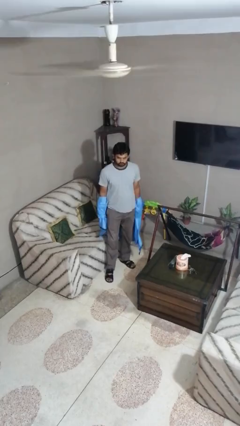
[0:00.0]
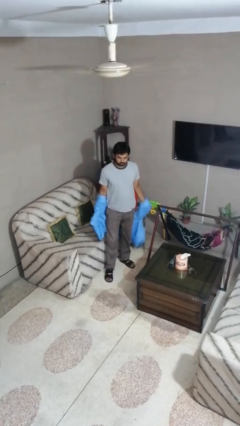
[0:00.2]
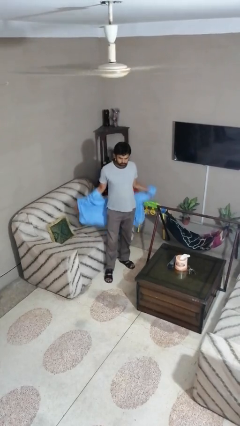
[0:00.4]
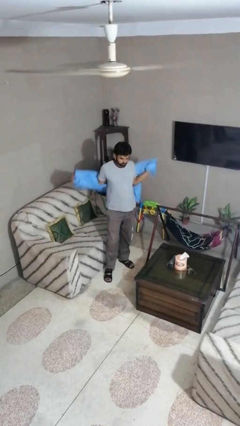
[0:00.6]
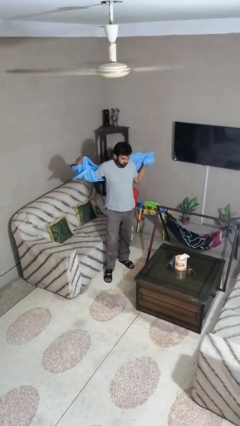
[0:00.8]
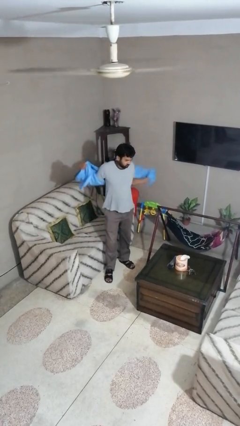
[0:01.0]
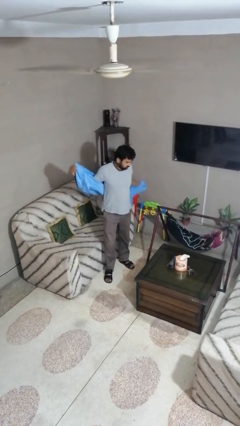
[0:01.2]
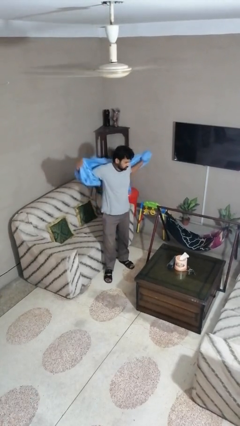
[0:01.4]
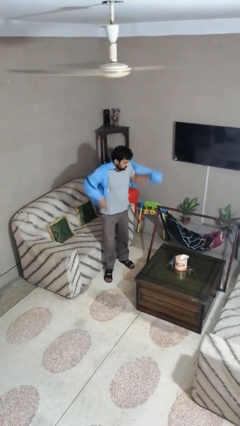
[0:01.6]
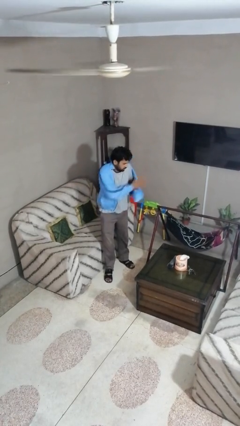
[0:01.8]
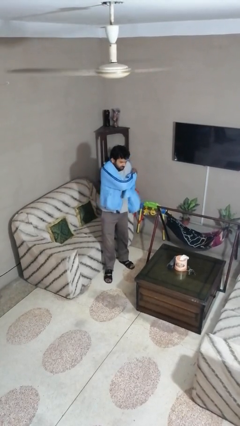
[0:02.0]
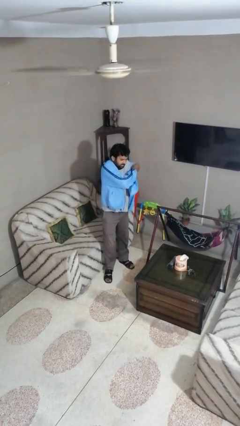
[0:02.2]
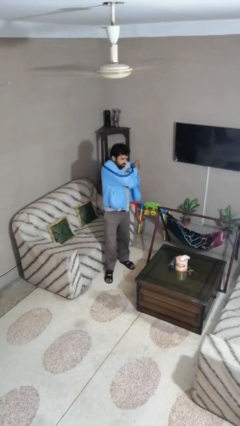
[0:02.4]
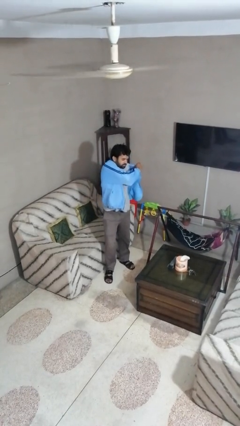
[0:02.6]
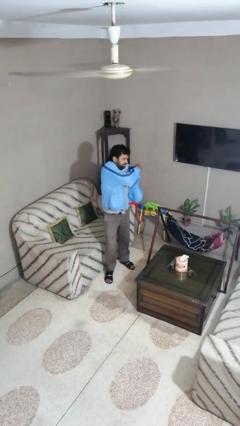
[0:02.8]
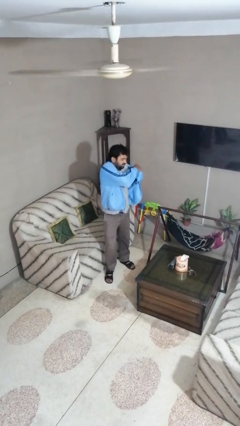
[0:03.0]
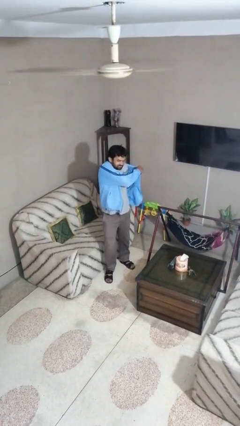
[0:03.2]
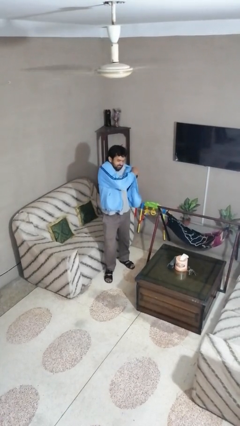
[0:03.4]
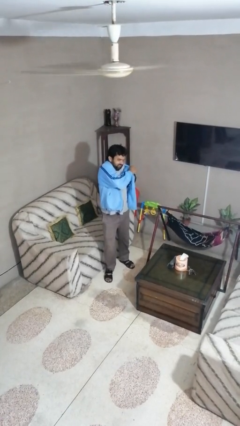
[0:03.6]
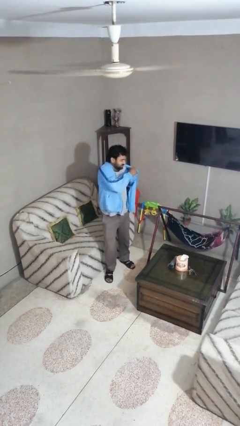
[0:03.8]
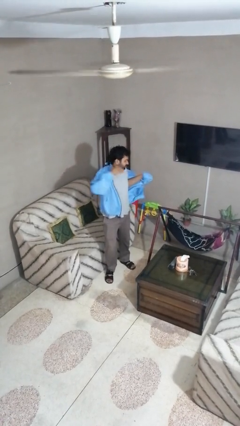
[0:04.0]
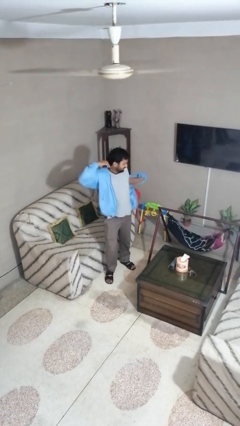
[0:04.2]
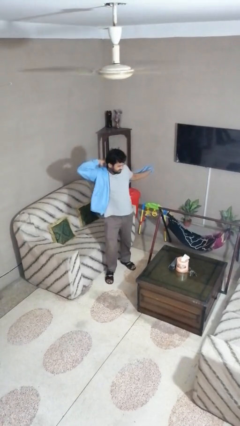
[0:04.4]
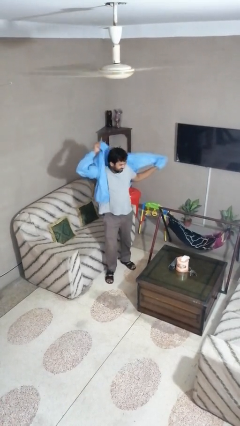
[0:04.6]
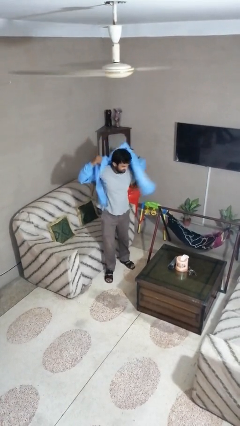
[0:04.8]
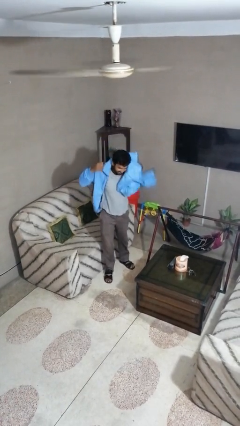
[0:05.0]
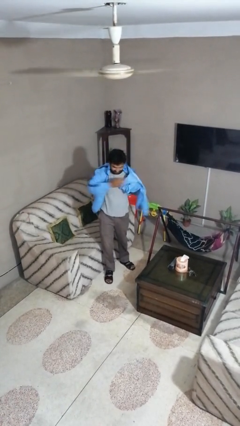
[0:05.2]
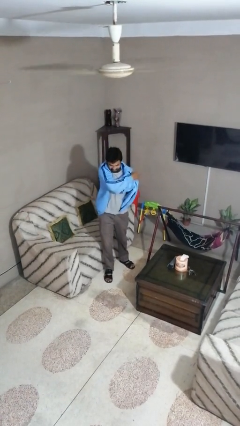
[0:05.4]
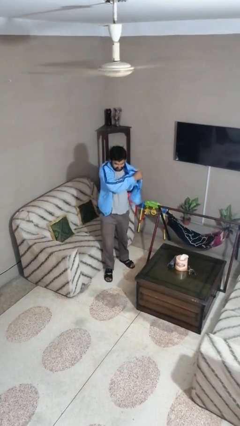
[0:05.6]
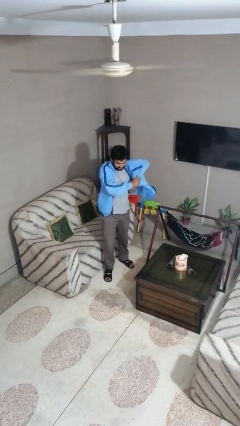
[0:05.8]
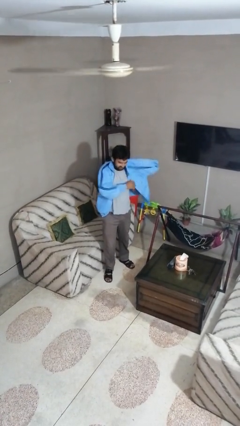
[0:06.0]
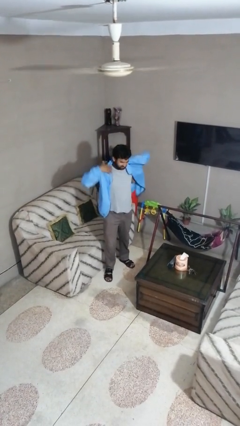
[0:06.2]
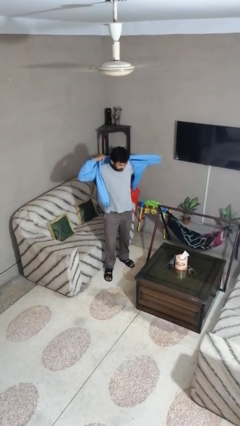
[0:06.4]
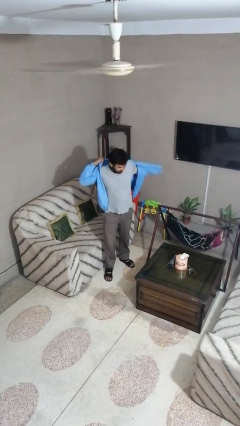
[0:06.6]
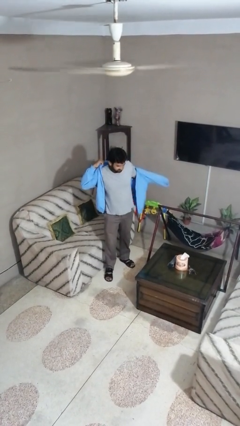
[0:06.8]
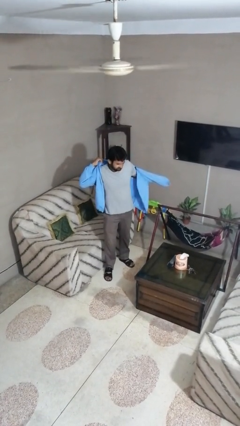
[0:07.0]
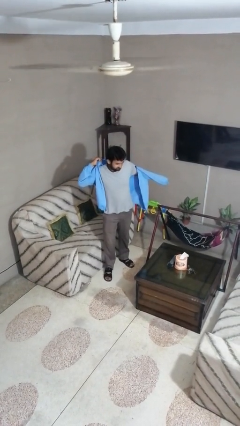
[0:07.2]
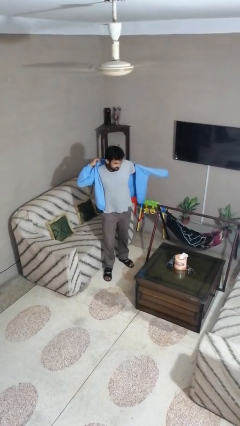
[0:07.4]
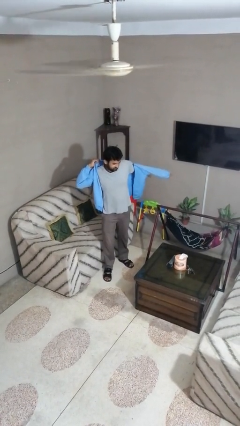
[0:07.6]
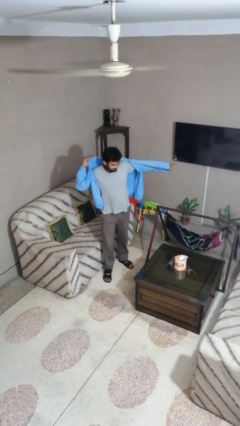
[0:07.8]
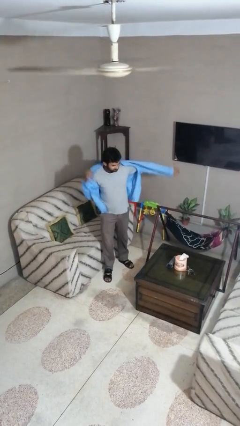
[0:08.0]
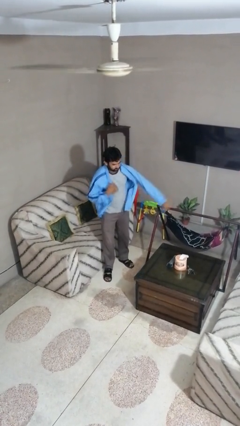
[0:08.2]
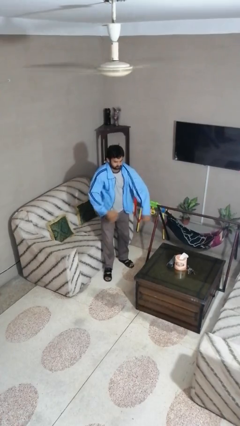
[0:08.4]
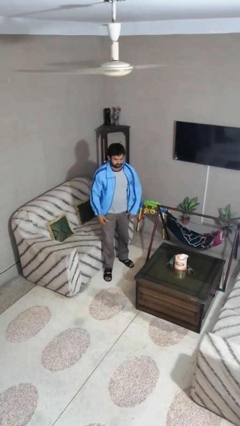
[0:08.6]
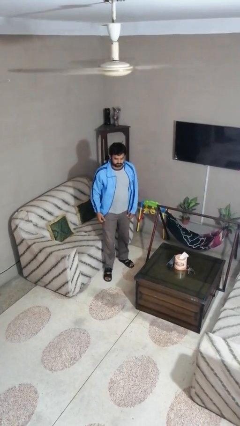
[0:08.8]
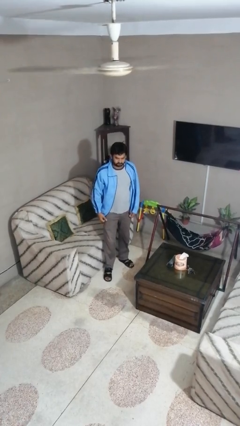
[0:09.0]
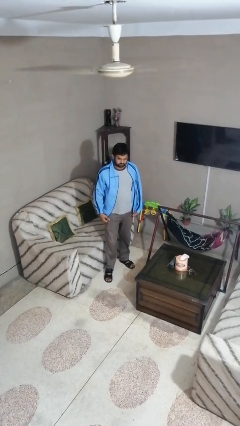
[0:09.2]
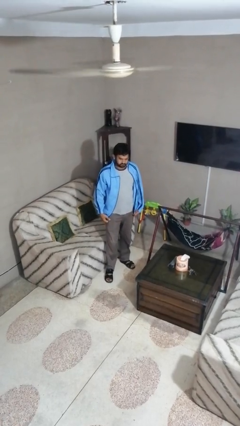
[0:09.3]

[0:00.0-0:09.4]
person puts on jacket

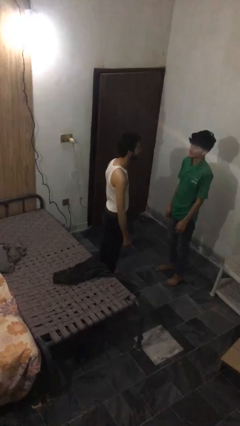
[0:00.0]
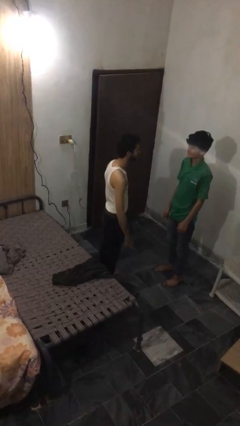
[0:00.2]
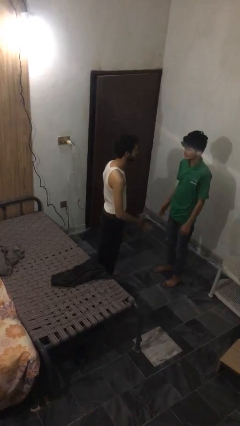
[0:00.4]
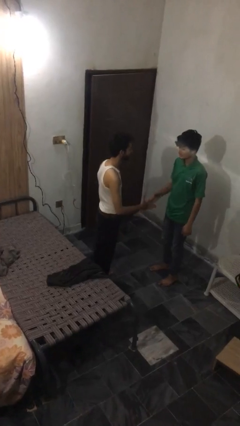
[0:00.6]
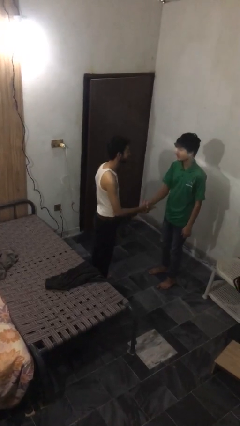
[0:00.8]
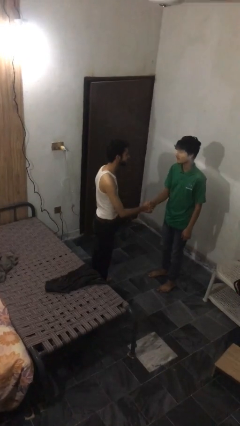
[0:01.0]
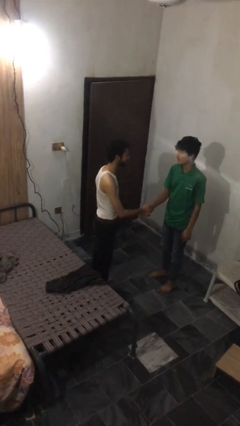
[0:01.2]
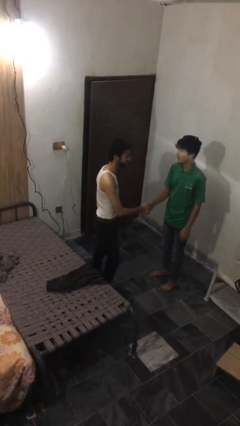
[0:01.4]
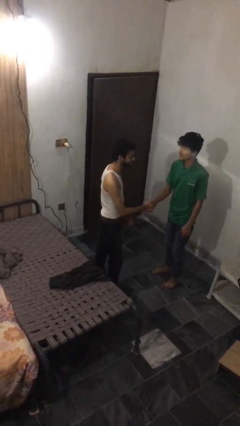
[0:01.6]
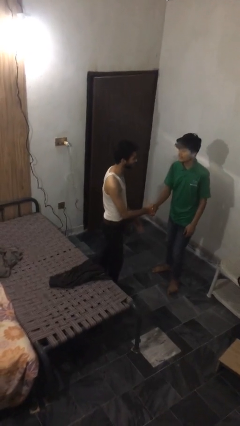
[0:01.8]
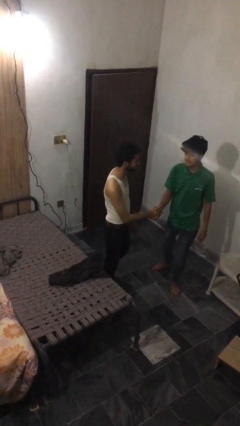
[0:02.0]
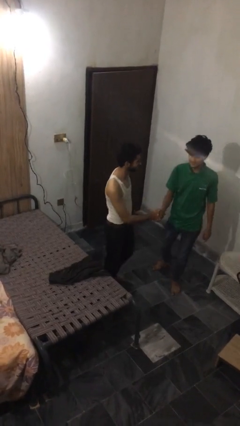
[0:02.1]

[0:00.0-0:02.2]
person shakes hand

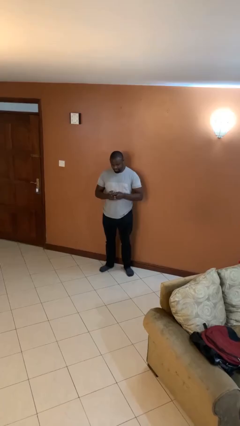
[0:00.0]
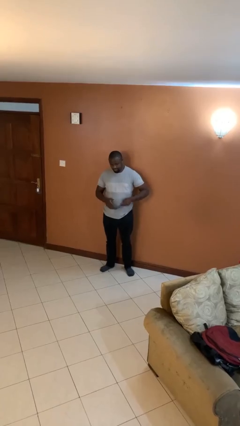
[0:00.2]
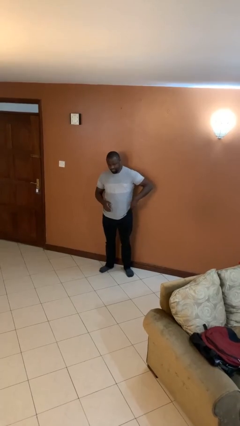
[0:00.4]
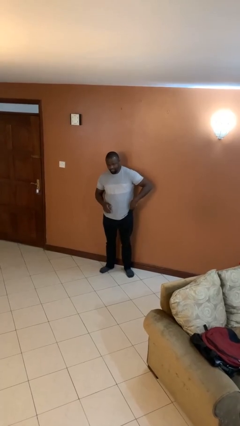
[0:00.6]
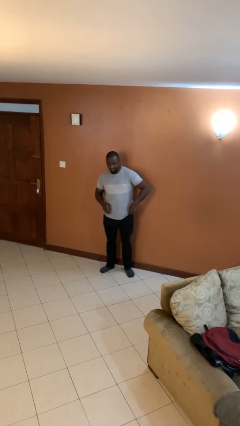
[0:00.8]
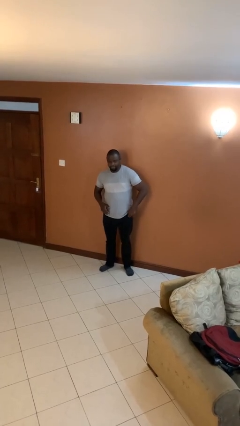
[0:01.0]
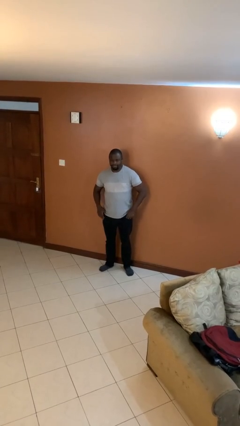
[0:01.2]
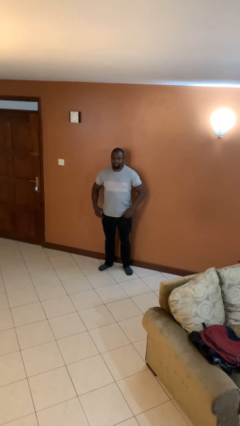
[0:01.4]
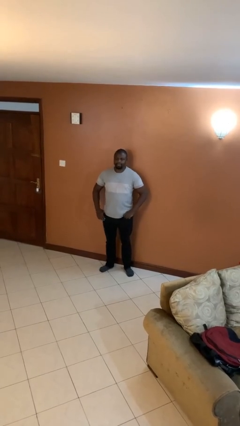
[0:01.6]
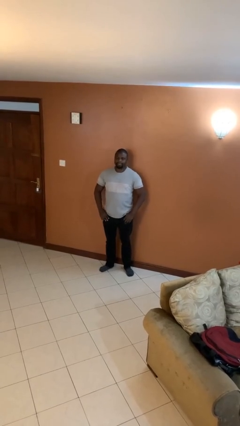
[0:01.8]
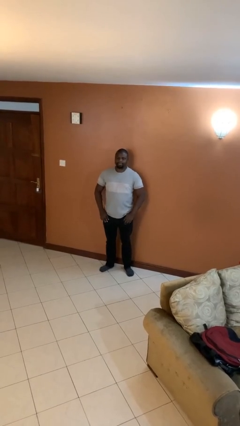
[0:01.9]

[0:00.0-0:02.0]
person puts phone into pocket

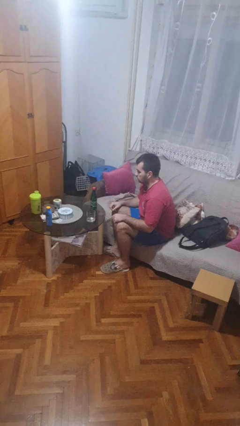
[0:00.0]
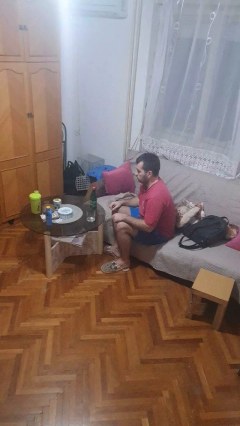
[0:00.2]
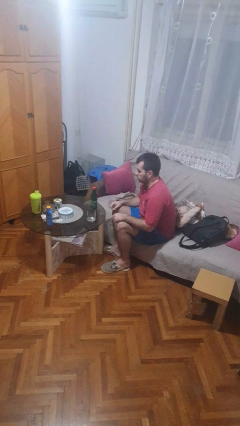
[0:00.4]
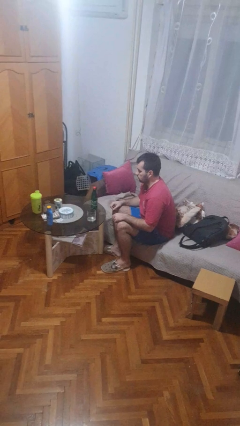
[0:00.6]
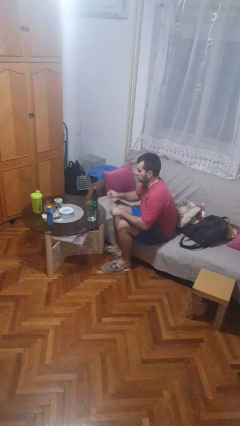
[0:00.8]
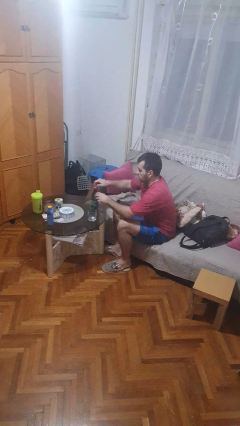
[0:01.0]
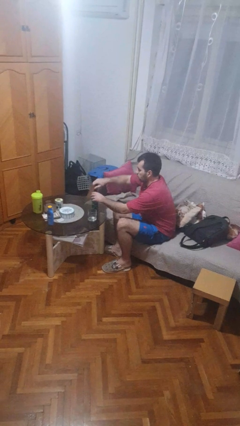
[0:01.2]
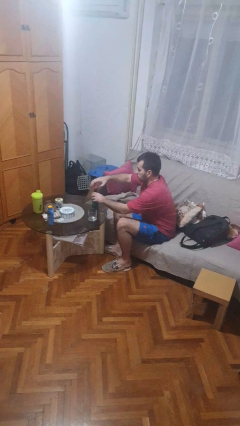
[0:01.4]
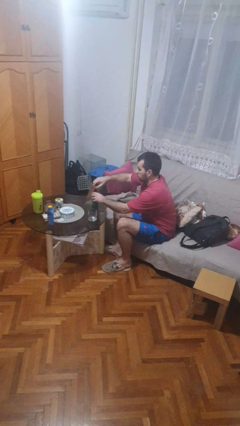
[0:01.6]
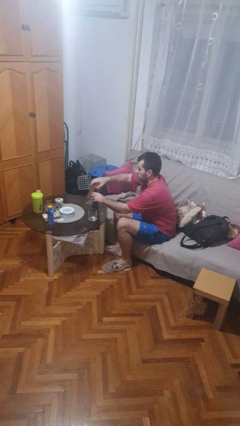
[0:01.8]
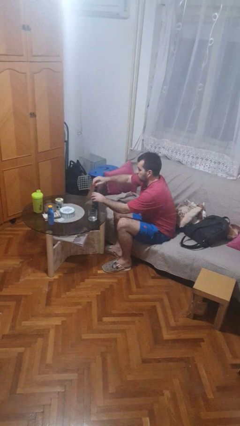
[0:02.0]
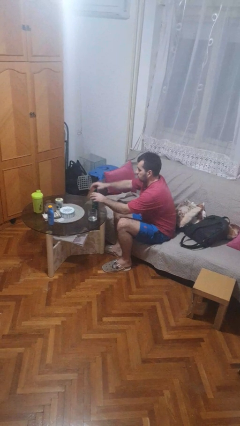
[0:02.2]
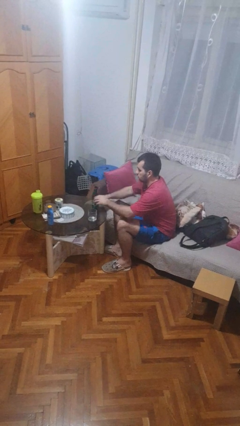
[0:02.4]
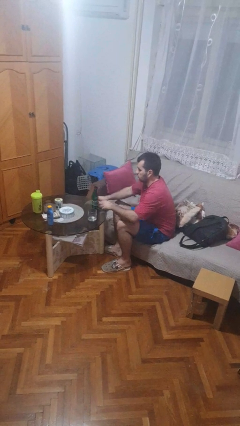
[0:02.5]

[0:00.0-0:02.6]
person unscrews lid from bottle

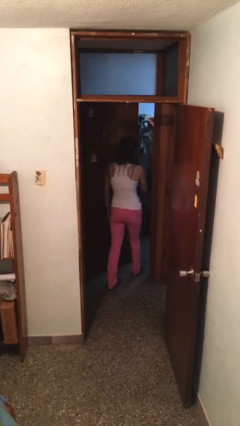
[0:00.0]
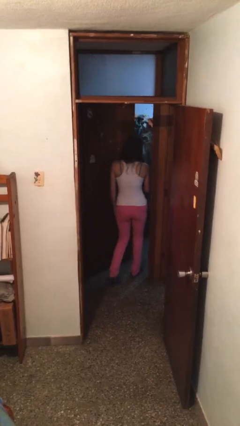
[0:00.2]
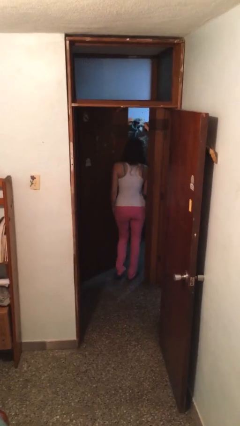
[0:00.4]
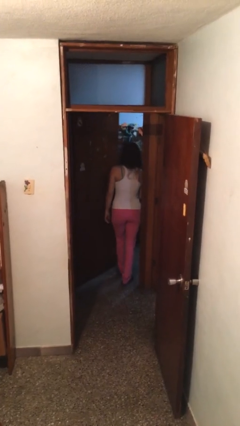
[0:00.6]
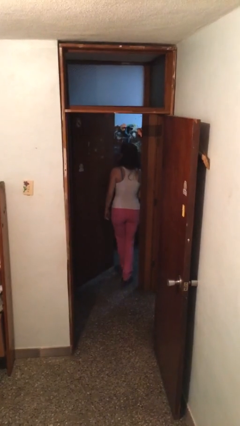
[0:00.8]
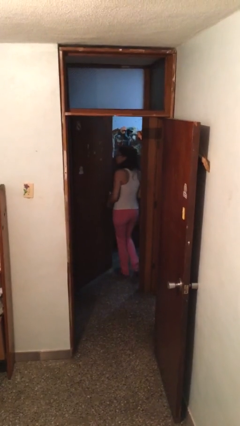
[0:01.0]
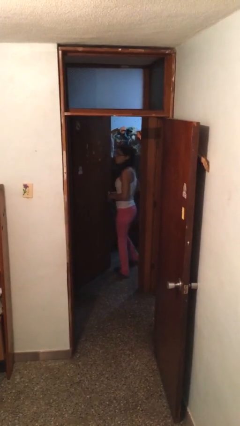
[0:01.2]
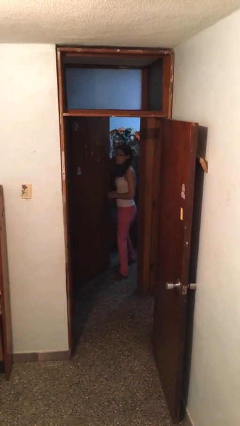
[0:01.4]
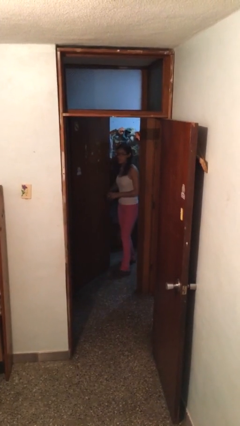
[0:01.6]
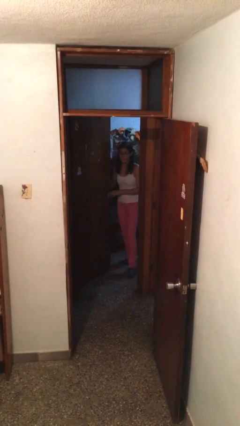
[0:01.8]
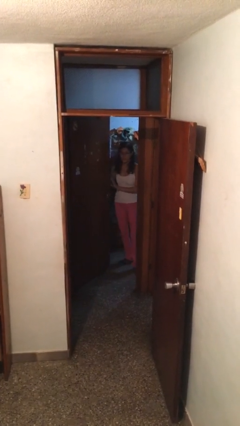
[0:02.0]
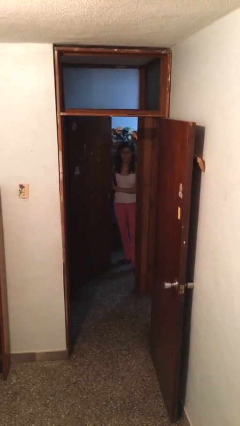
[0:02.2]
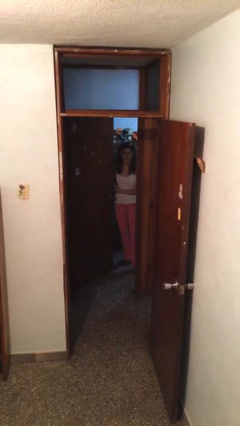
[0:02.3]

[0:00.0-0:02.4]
person exits scene through structure
